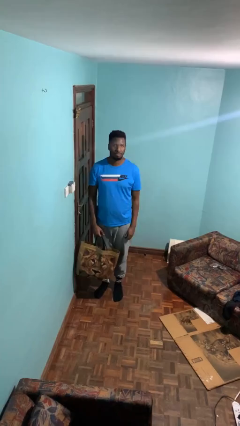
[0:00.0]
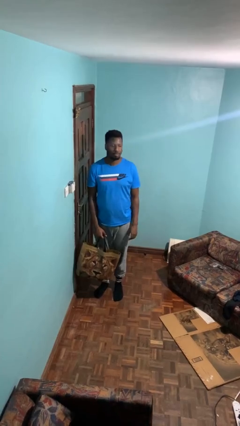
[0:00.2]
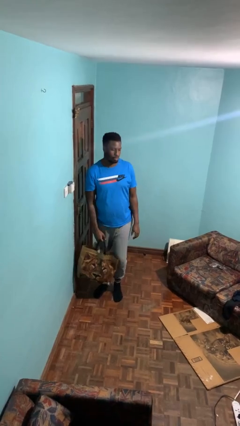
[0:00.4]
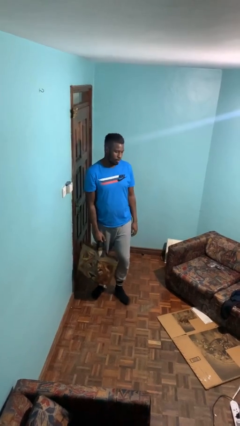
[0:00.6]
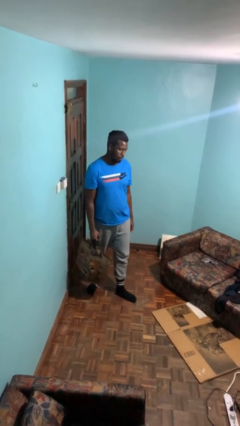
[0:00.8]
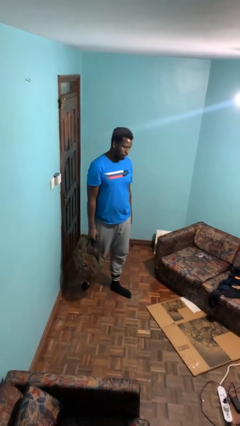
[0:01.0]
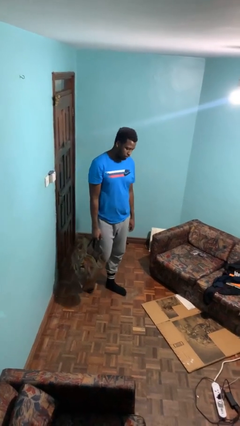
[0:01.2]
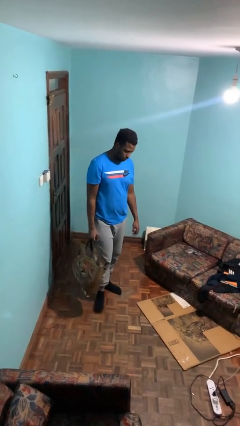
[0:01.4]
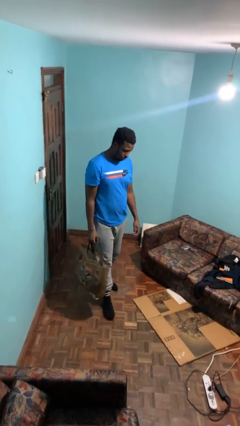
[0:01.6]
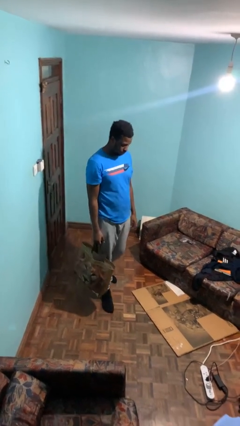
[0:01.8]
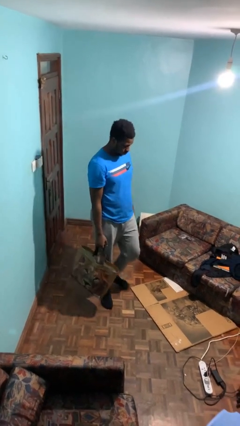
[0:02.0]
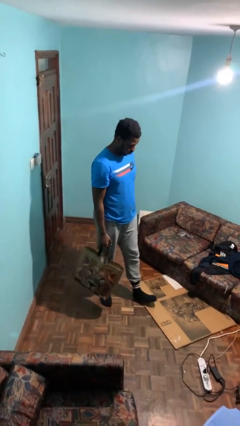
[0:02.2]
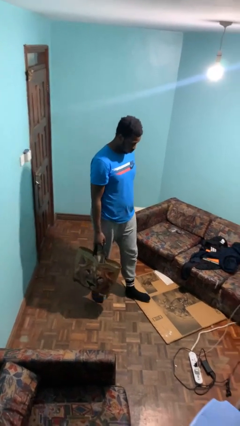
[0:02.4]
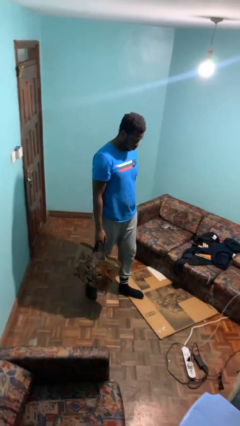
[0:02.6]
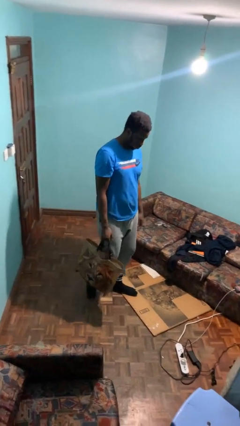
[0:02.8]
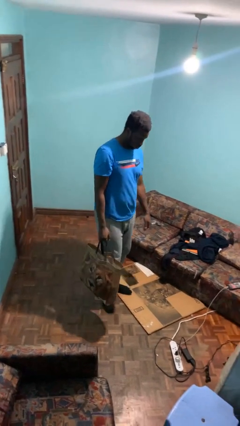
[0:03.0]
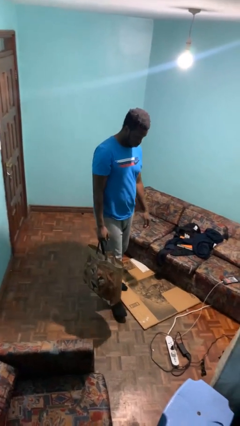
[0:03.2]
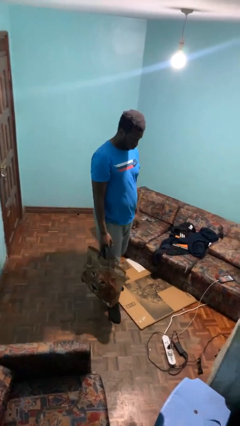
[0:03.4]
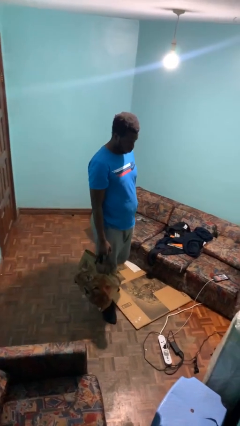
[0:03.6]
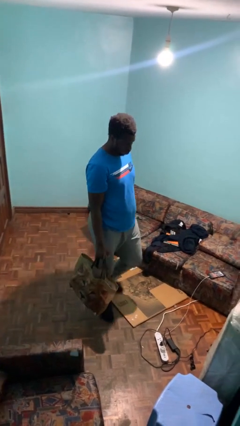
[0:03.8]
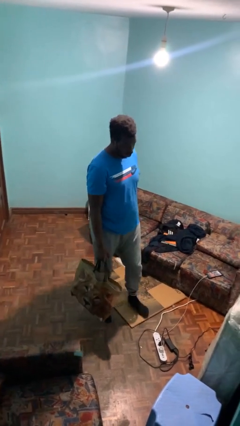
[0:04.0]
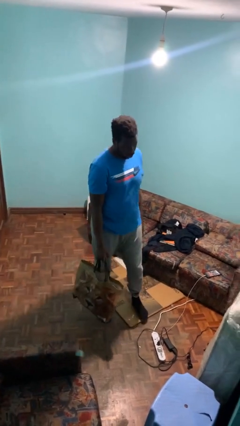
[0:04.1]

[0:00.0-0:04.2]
person carries groceries

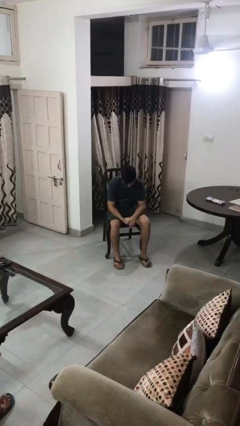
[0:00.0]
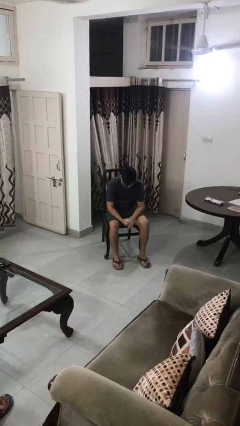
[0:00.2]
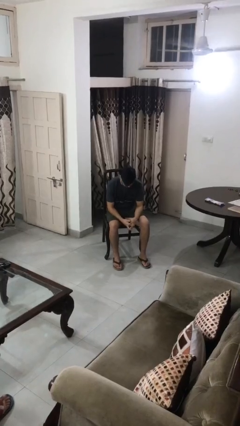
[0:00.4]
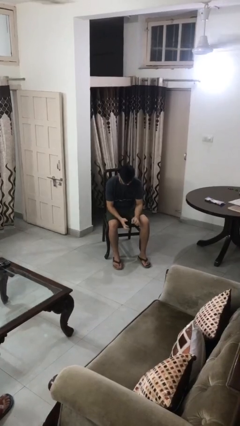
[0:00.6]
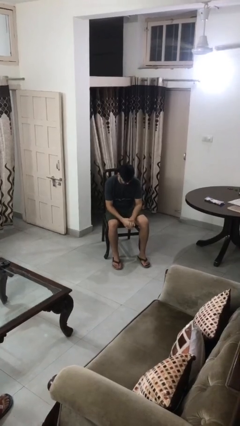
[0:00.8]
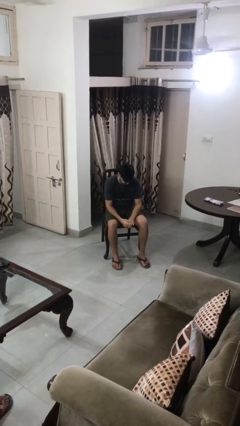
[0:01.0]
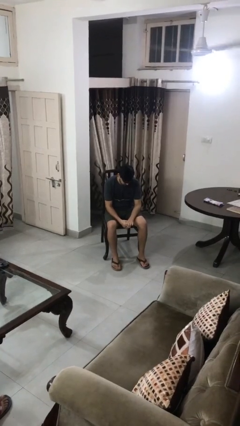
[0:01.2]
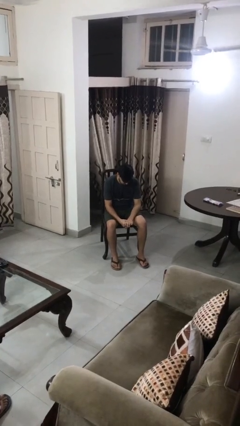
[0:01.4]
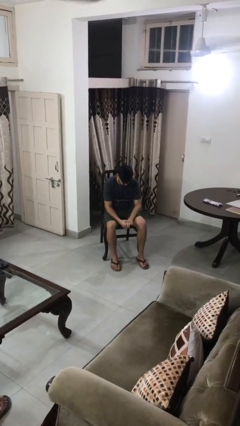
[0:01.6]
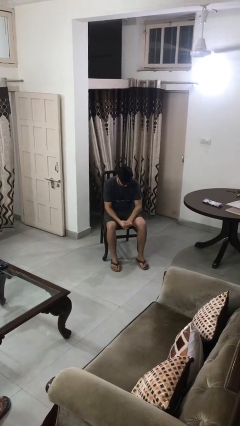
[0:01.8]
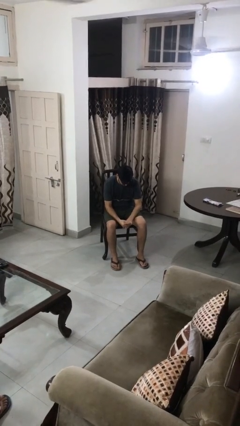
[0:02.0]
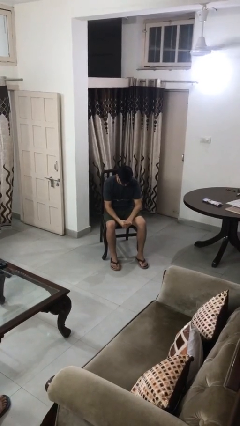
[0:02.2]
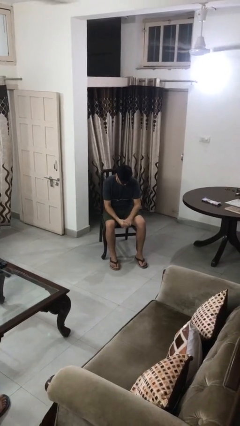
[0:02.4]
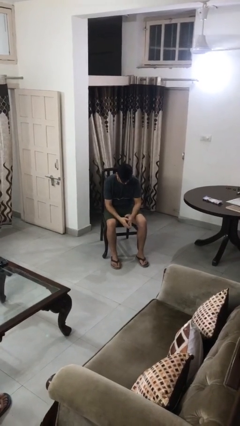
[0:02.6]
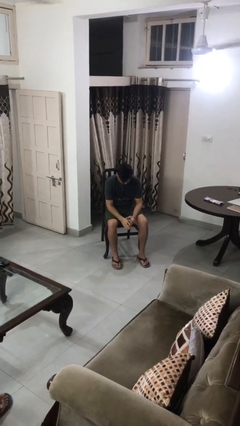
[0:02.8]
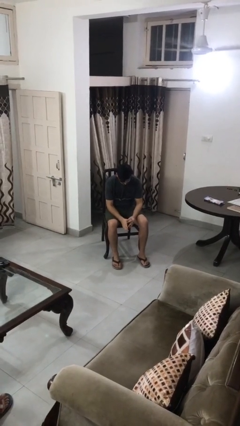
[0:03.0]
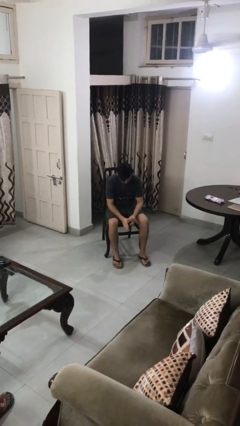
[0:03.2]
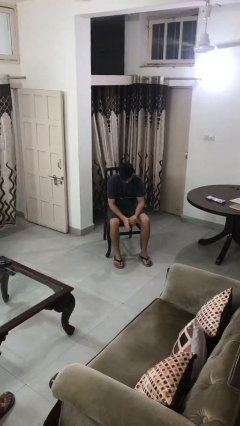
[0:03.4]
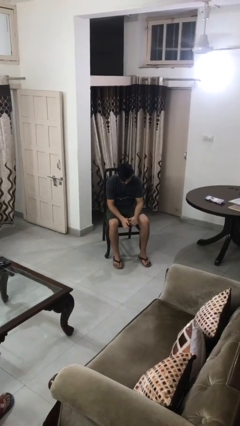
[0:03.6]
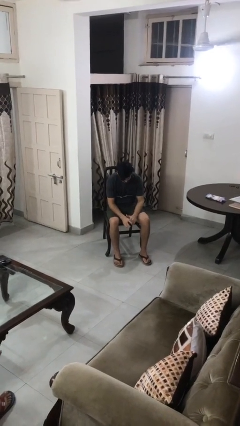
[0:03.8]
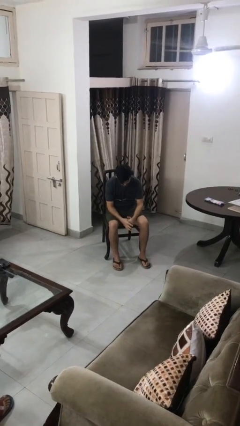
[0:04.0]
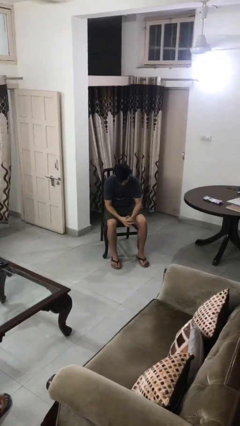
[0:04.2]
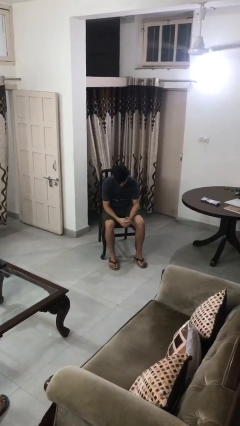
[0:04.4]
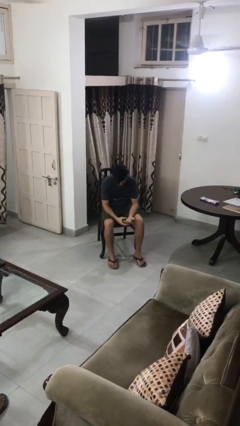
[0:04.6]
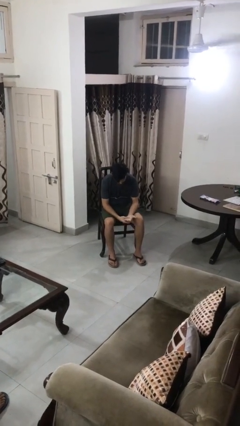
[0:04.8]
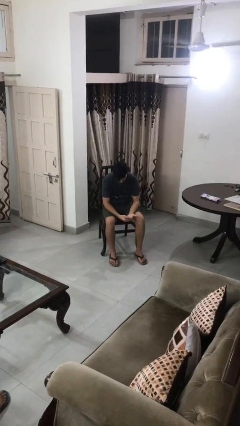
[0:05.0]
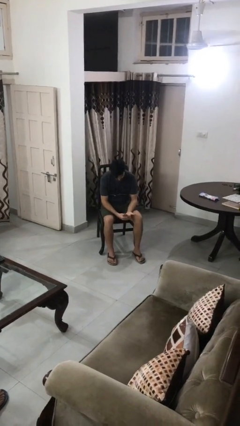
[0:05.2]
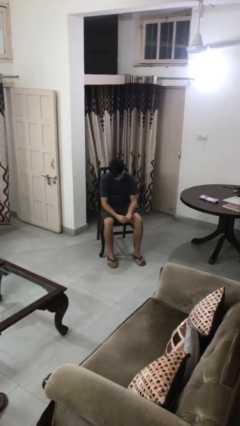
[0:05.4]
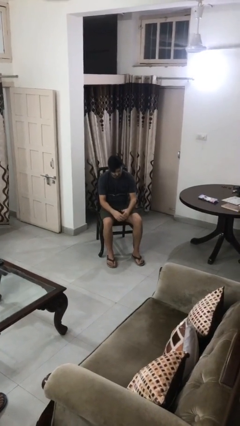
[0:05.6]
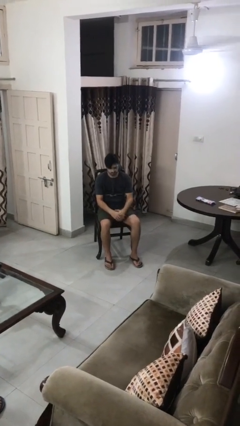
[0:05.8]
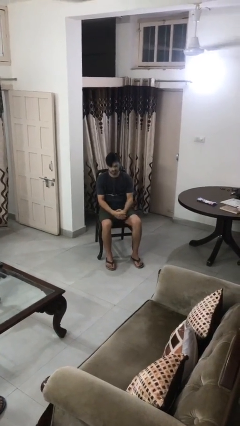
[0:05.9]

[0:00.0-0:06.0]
person looks at hands in lap

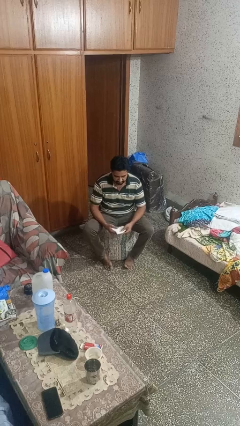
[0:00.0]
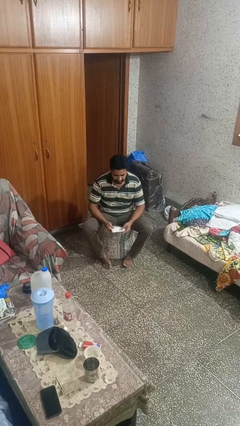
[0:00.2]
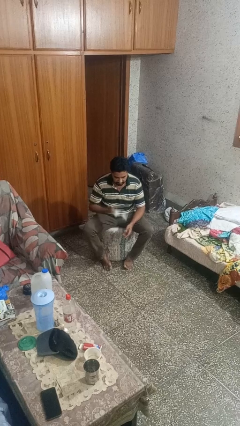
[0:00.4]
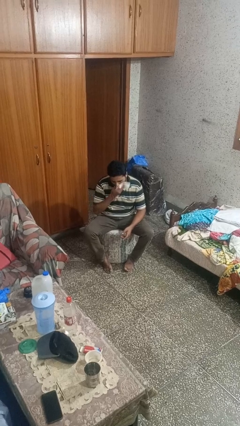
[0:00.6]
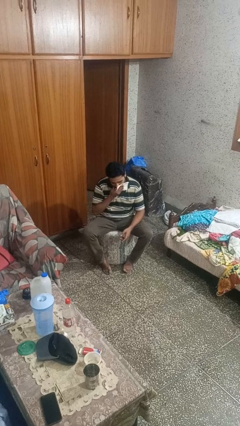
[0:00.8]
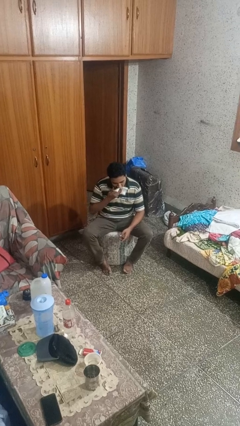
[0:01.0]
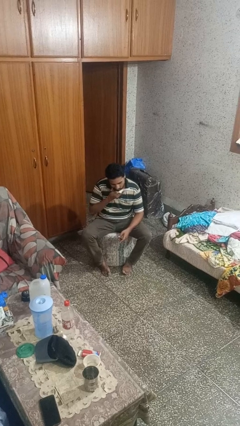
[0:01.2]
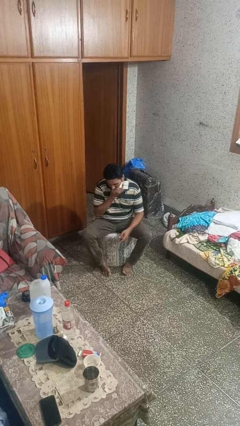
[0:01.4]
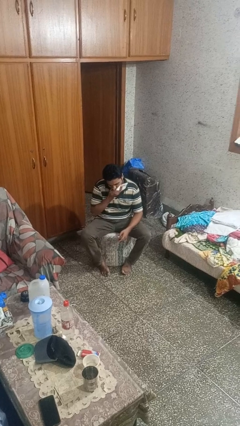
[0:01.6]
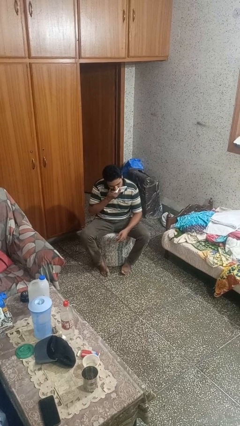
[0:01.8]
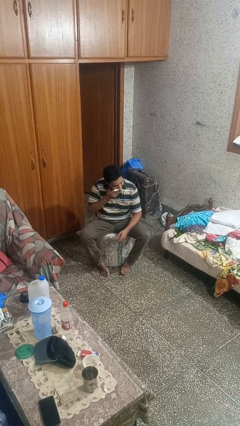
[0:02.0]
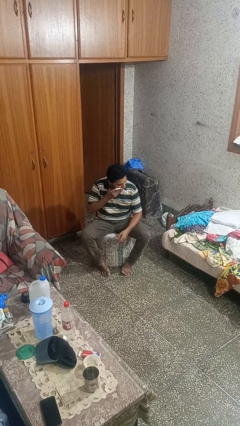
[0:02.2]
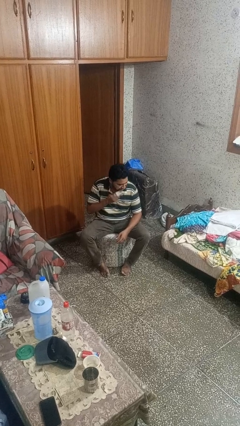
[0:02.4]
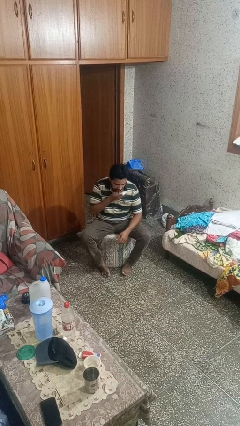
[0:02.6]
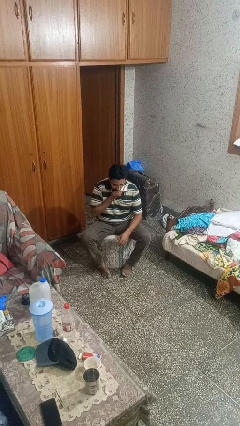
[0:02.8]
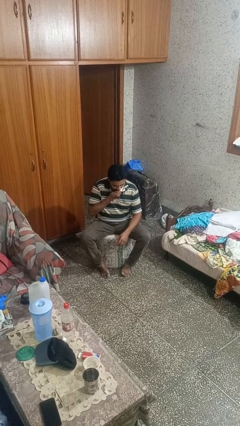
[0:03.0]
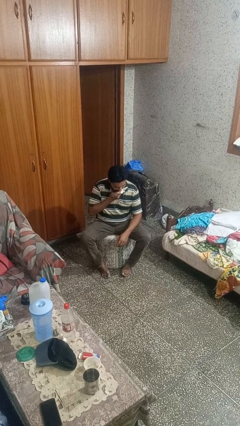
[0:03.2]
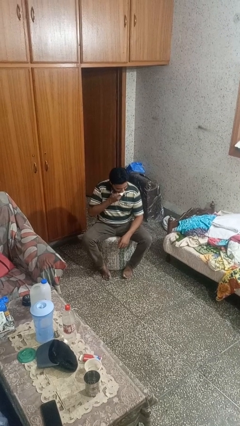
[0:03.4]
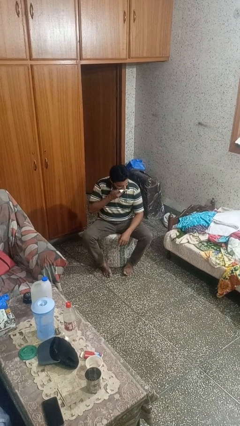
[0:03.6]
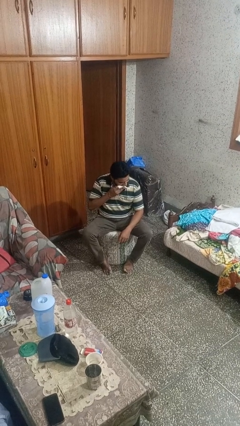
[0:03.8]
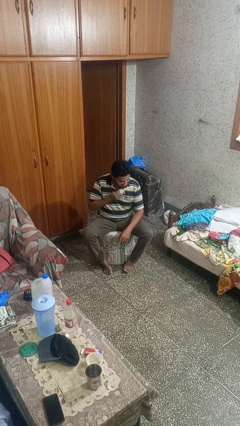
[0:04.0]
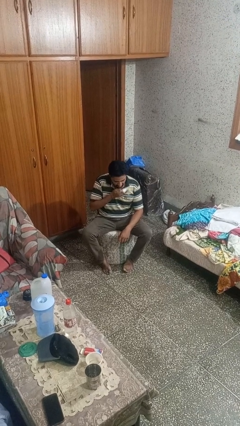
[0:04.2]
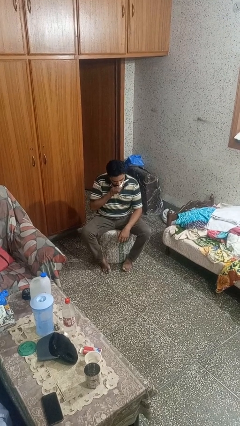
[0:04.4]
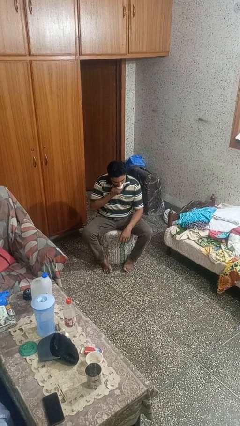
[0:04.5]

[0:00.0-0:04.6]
person wipes mouth with napkin

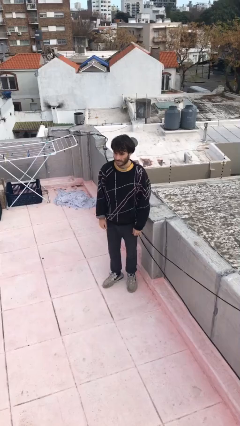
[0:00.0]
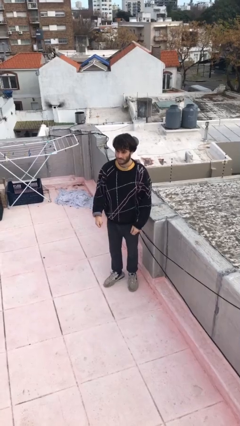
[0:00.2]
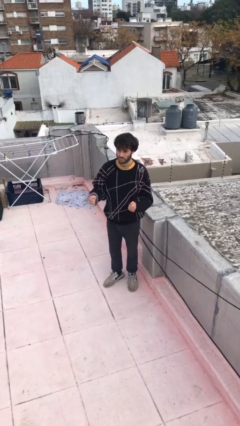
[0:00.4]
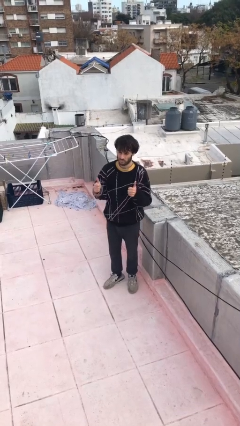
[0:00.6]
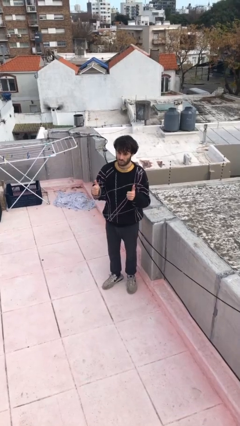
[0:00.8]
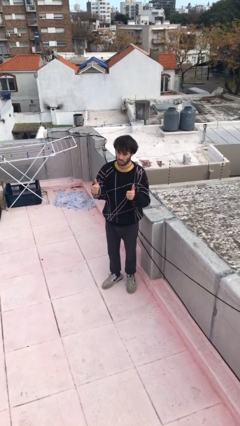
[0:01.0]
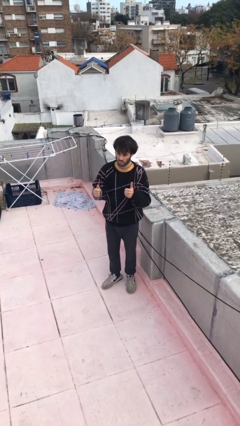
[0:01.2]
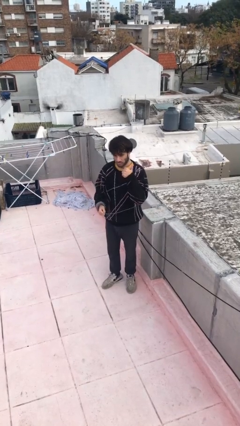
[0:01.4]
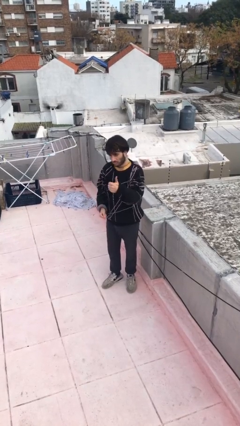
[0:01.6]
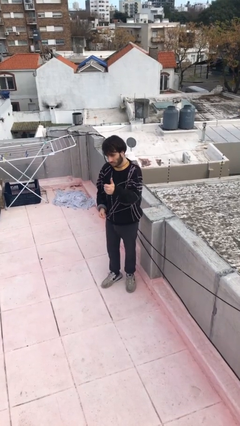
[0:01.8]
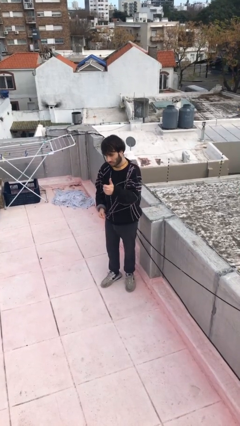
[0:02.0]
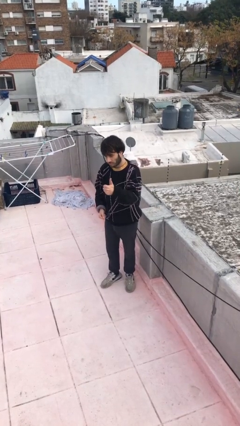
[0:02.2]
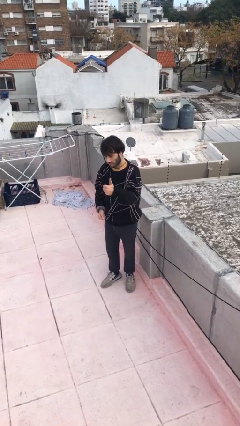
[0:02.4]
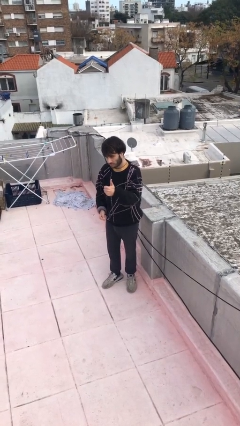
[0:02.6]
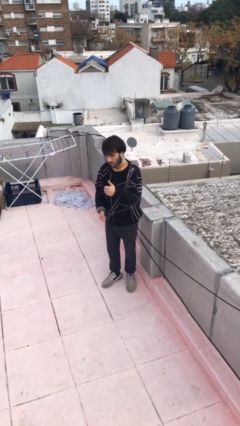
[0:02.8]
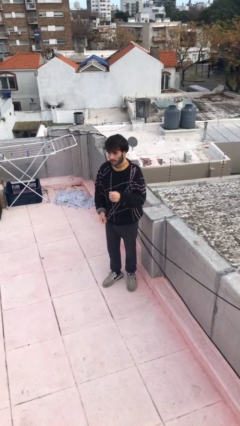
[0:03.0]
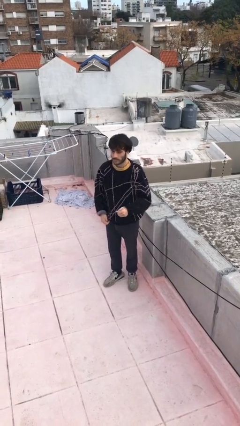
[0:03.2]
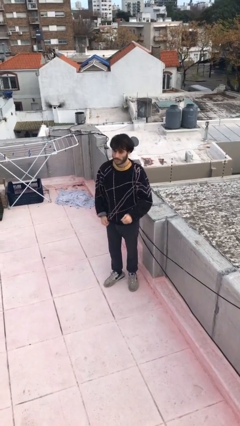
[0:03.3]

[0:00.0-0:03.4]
person gestures thumbs up
